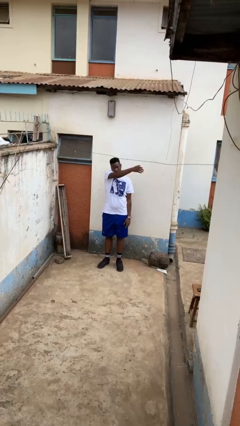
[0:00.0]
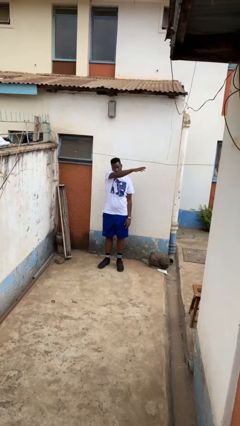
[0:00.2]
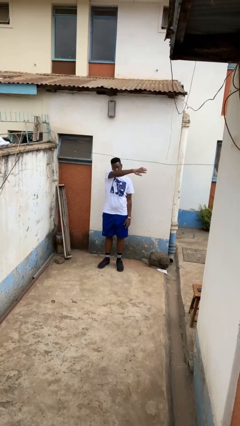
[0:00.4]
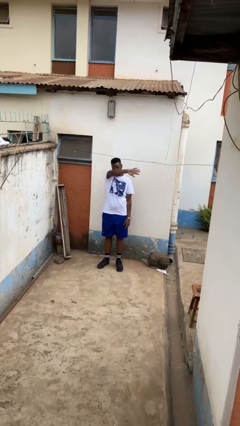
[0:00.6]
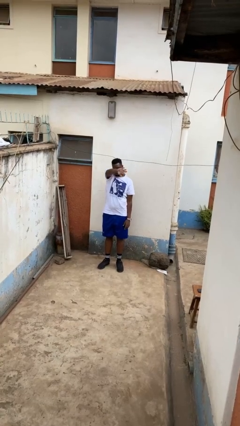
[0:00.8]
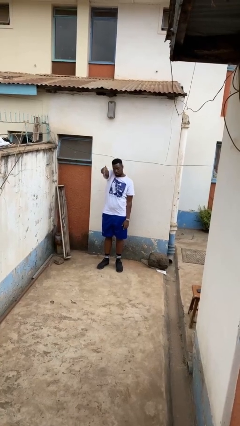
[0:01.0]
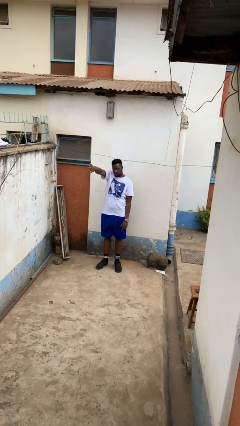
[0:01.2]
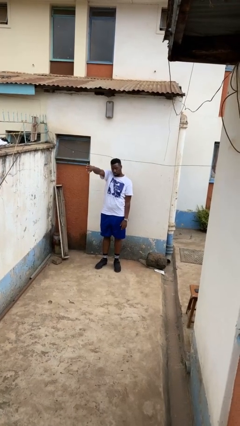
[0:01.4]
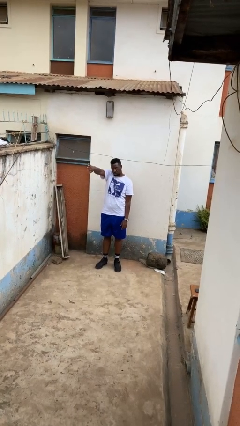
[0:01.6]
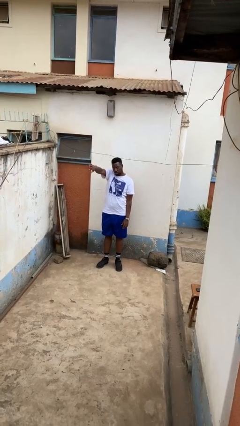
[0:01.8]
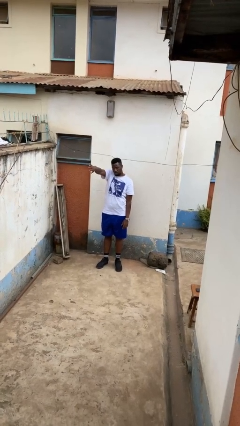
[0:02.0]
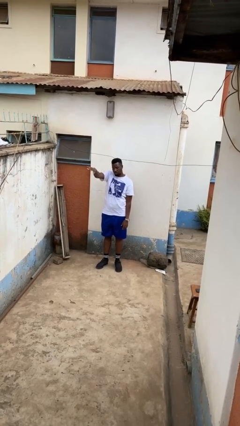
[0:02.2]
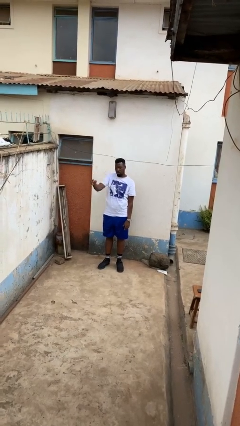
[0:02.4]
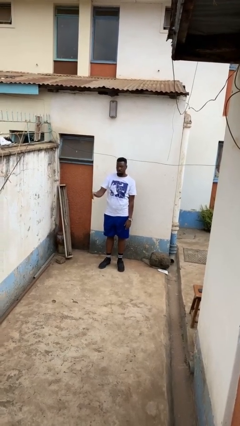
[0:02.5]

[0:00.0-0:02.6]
person gestures swipe right

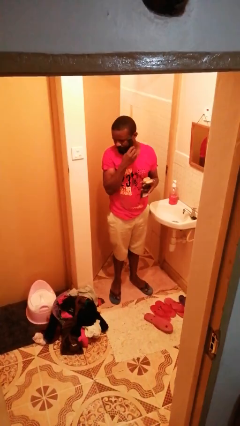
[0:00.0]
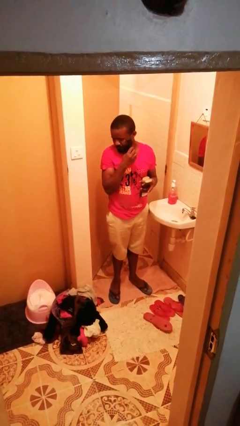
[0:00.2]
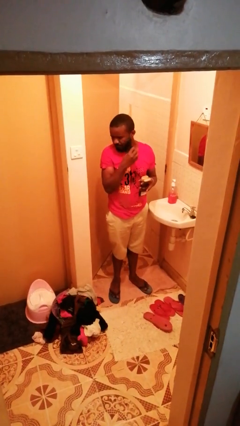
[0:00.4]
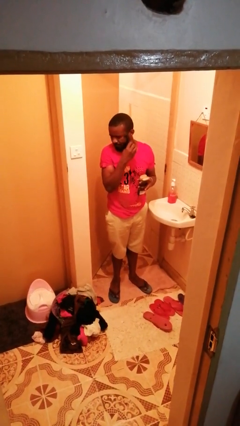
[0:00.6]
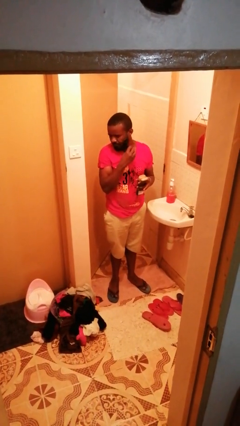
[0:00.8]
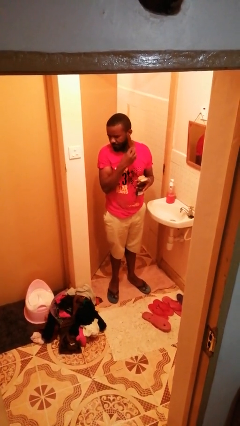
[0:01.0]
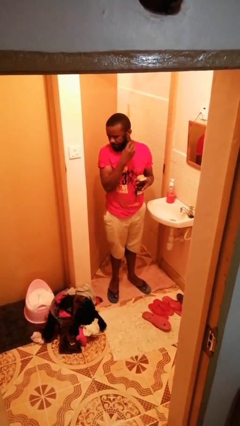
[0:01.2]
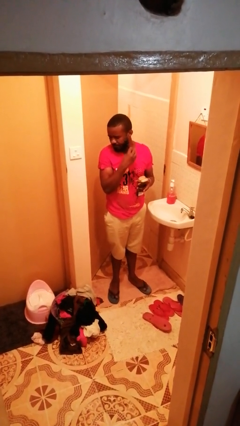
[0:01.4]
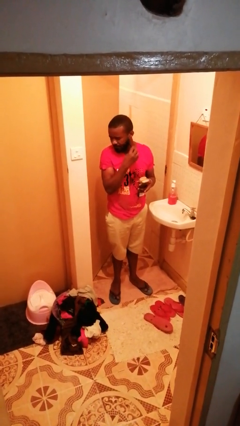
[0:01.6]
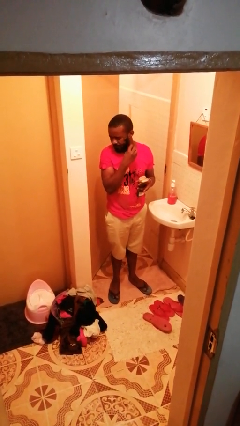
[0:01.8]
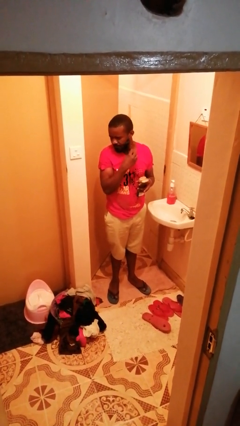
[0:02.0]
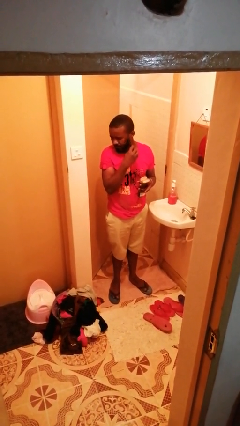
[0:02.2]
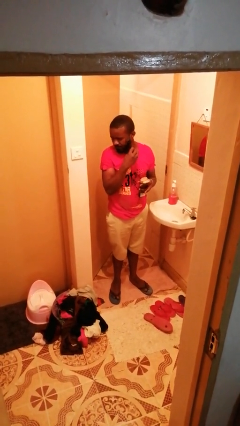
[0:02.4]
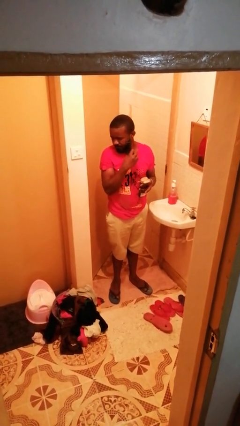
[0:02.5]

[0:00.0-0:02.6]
person shaves face

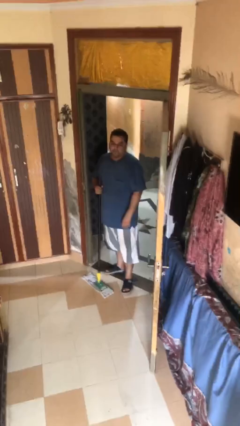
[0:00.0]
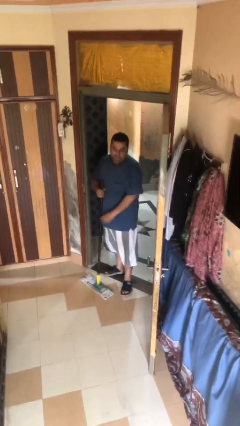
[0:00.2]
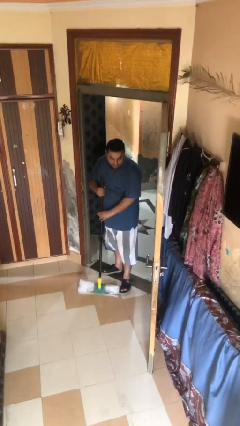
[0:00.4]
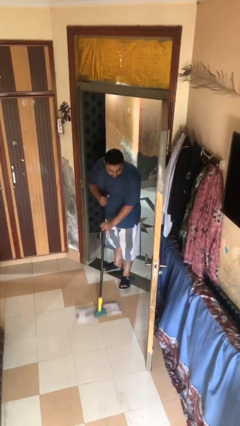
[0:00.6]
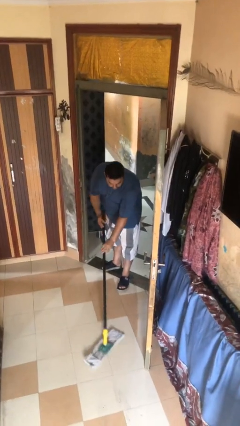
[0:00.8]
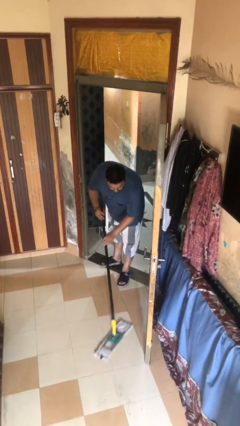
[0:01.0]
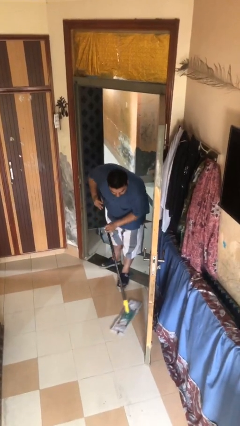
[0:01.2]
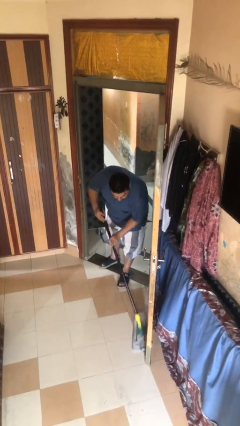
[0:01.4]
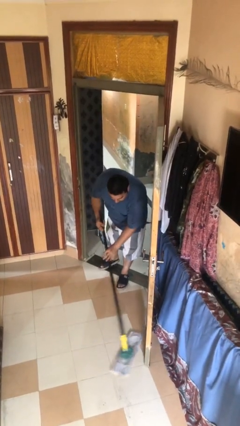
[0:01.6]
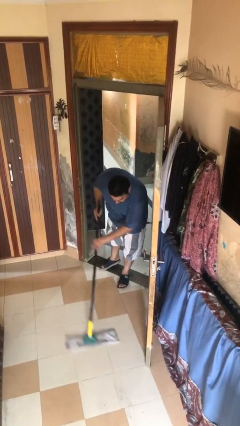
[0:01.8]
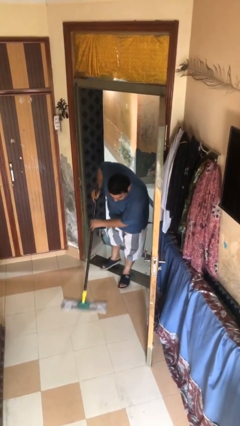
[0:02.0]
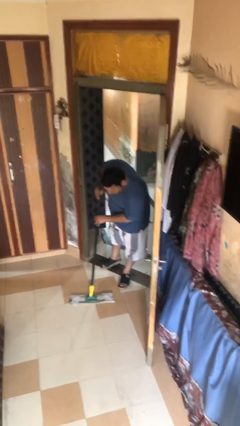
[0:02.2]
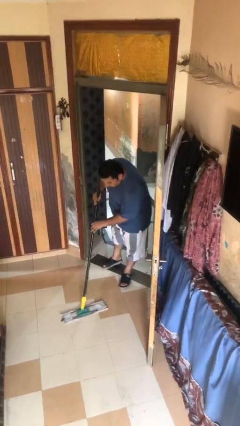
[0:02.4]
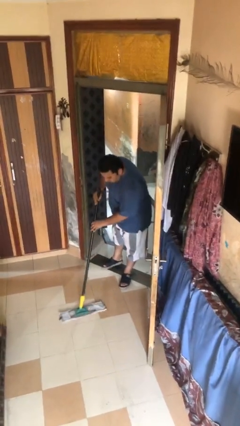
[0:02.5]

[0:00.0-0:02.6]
person mops

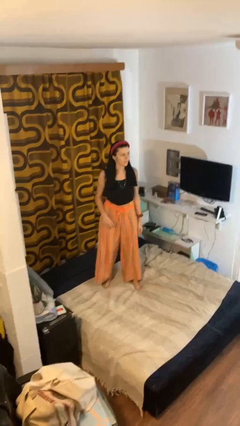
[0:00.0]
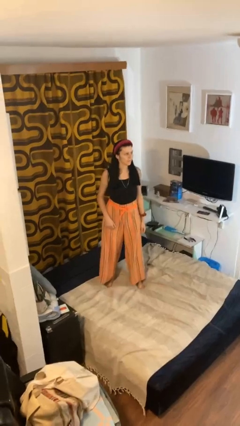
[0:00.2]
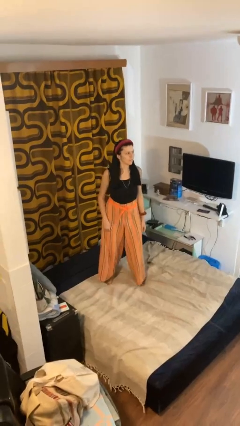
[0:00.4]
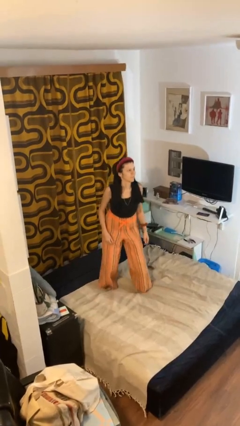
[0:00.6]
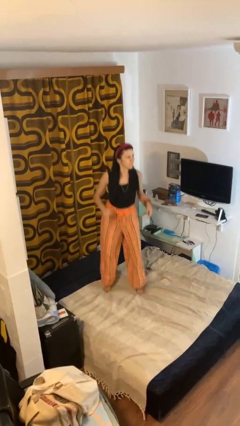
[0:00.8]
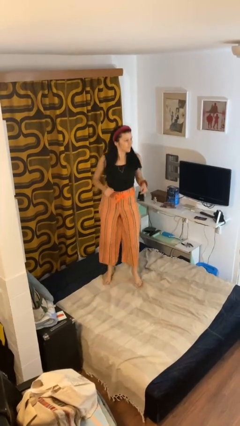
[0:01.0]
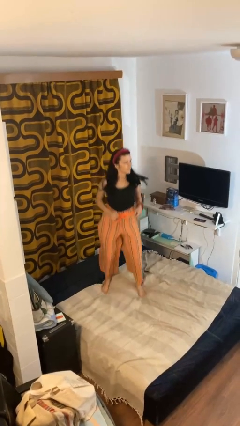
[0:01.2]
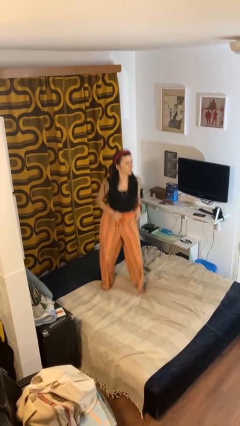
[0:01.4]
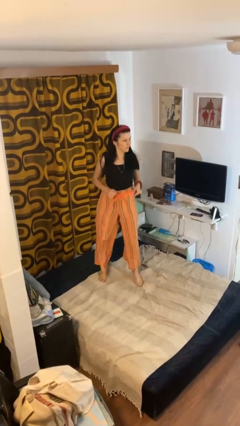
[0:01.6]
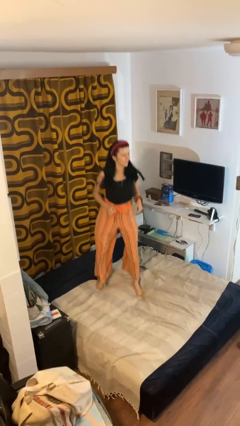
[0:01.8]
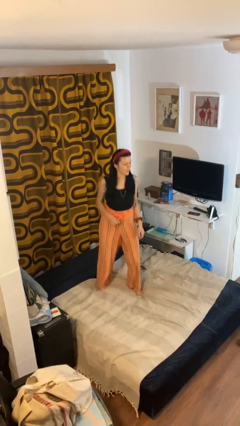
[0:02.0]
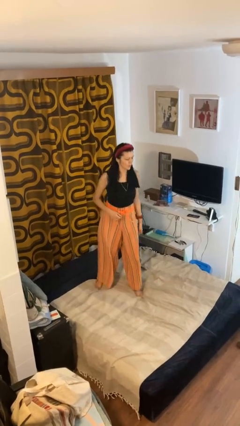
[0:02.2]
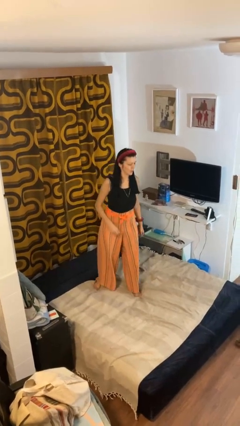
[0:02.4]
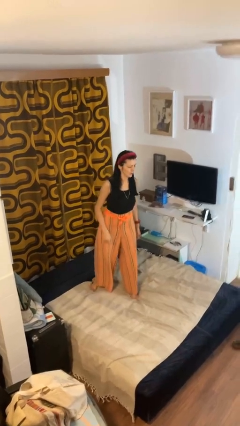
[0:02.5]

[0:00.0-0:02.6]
person jumps on bed

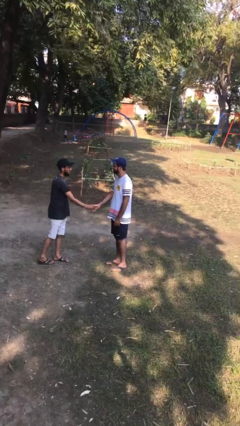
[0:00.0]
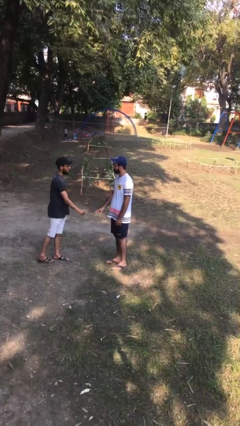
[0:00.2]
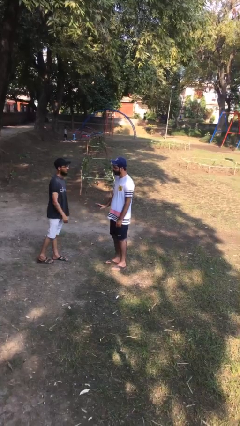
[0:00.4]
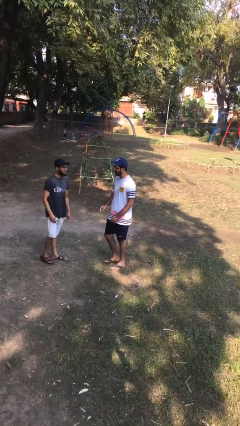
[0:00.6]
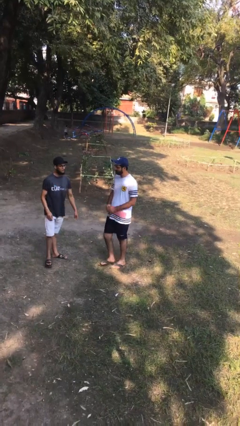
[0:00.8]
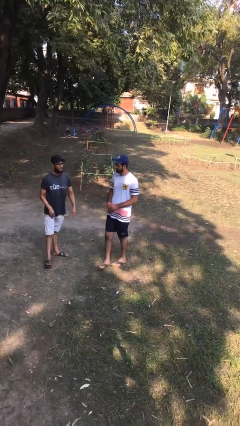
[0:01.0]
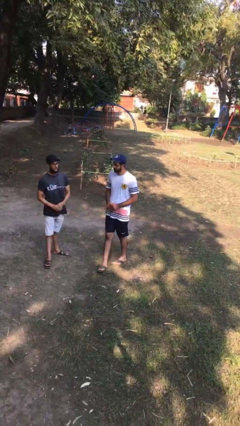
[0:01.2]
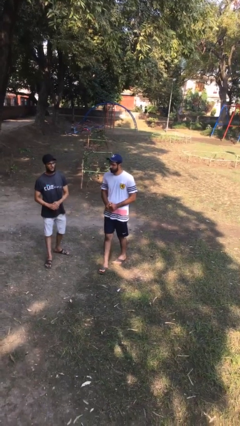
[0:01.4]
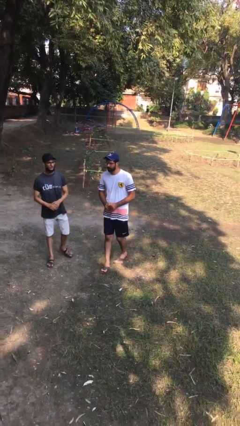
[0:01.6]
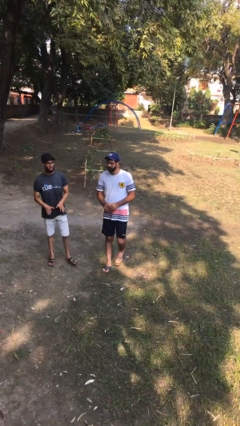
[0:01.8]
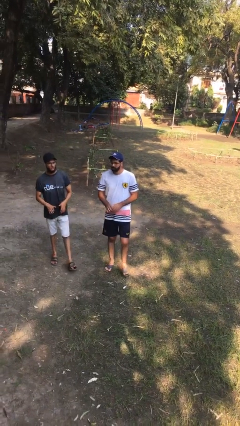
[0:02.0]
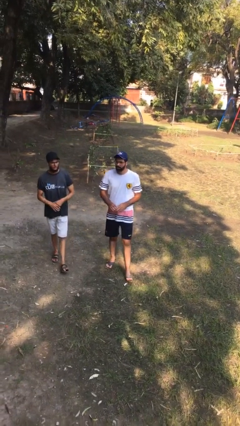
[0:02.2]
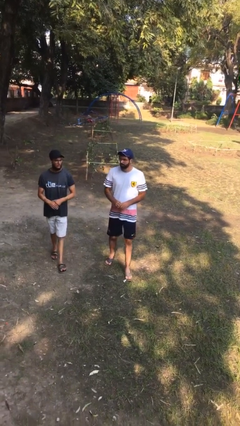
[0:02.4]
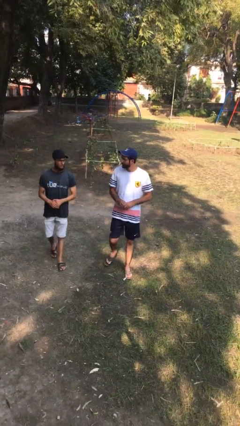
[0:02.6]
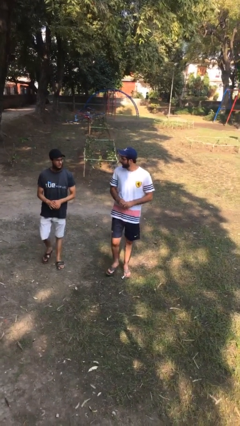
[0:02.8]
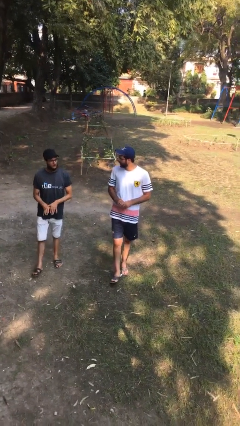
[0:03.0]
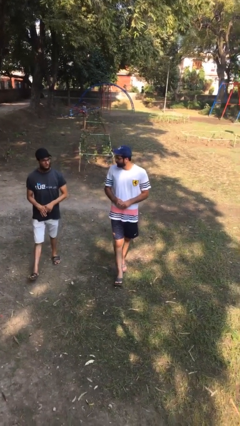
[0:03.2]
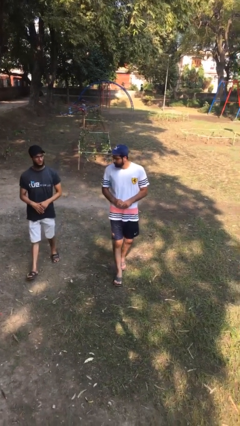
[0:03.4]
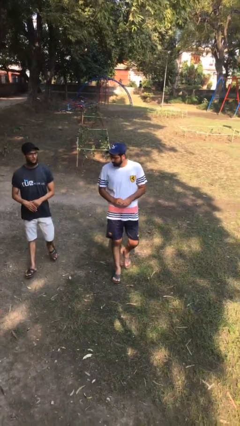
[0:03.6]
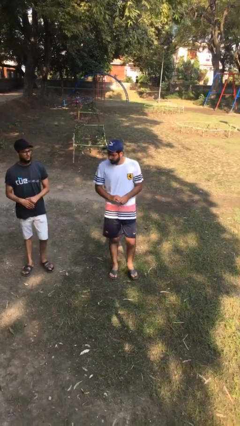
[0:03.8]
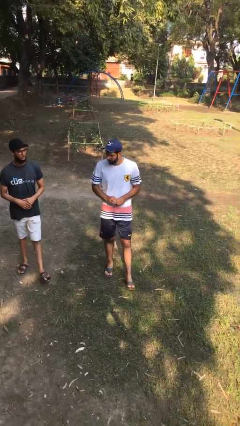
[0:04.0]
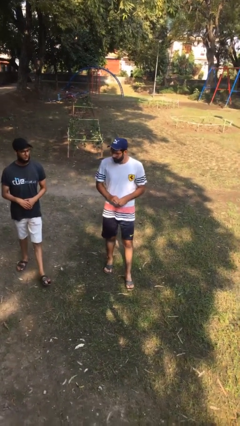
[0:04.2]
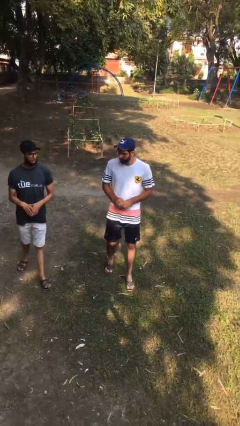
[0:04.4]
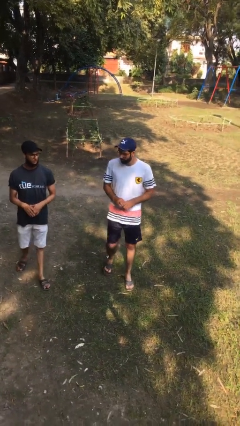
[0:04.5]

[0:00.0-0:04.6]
person talks to person

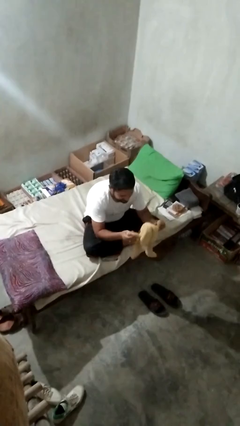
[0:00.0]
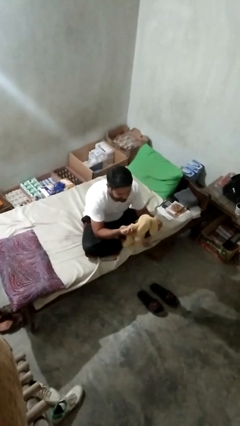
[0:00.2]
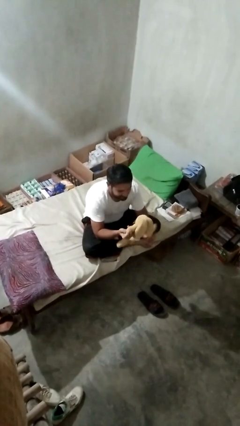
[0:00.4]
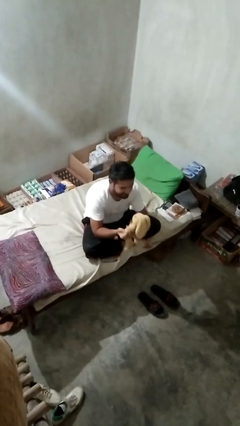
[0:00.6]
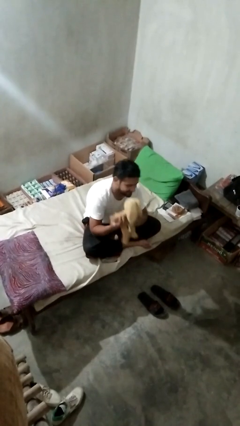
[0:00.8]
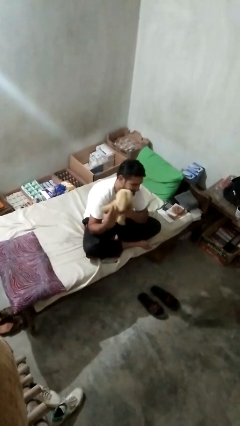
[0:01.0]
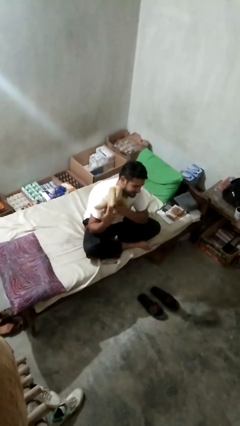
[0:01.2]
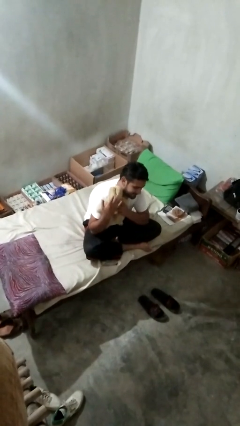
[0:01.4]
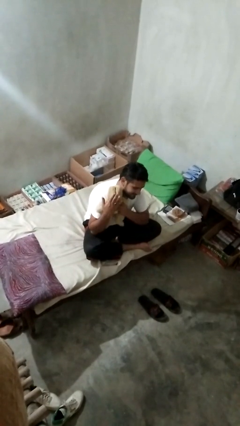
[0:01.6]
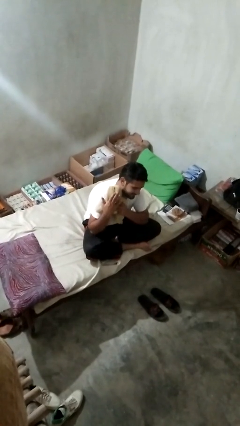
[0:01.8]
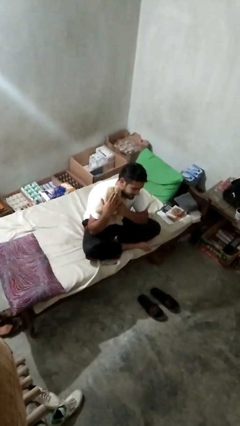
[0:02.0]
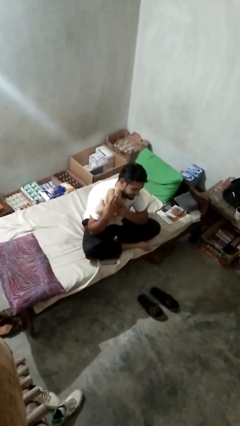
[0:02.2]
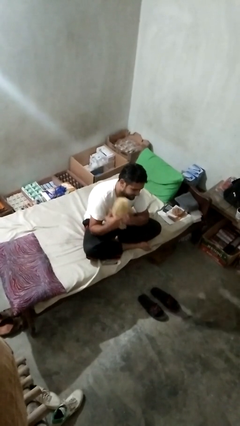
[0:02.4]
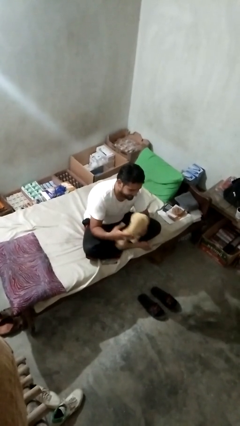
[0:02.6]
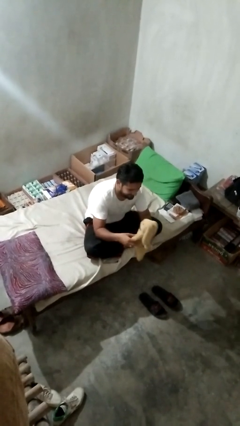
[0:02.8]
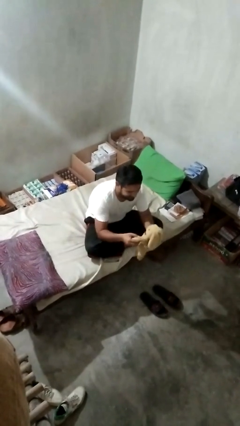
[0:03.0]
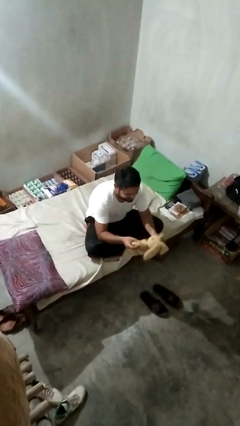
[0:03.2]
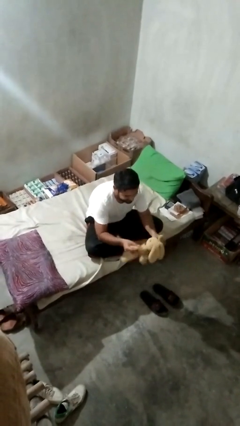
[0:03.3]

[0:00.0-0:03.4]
person hugs stuffed animal
